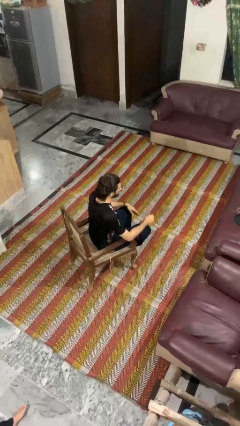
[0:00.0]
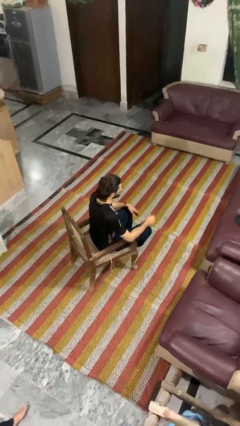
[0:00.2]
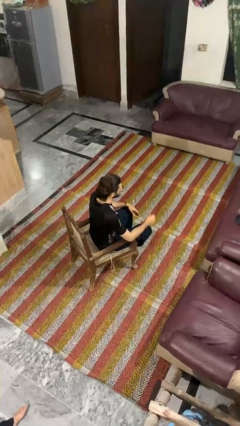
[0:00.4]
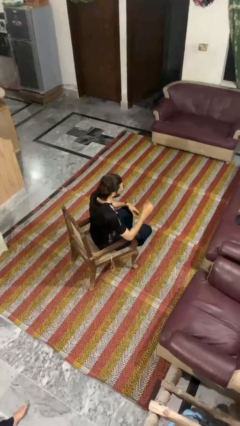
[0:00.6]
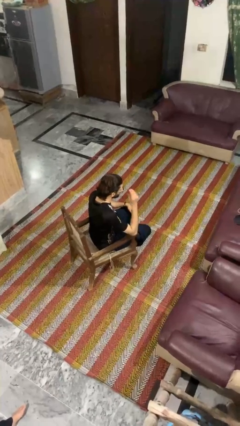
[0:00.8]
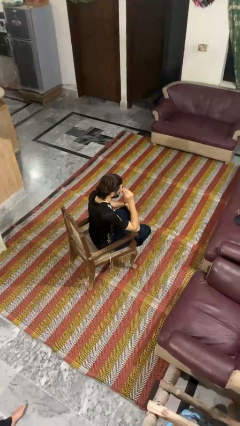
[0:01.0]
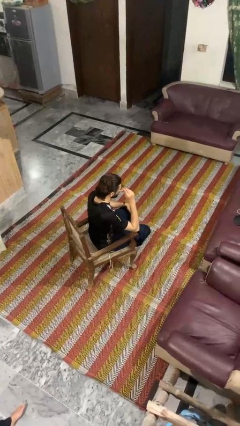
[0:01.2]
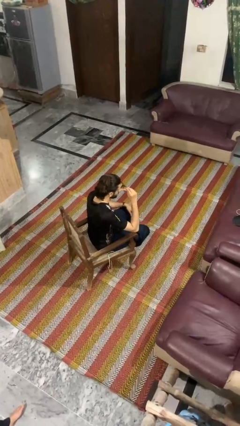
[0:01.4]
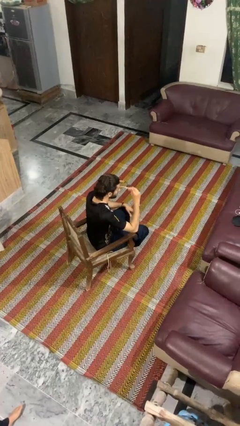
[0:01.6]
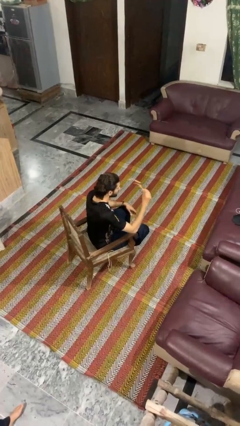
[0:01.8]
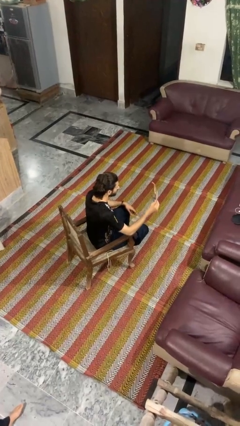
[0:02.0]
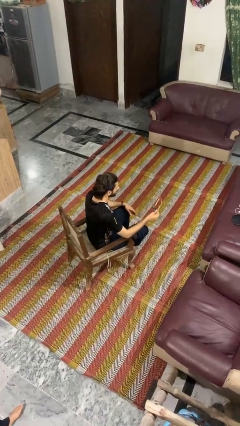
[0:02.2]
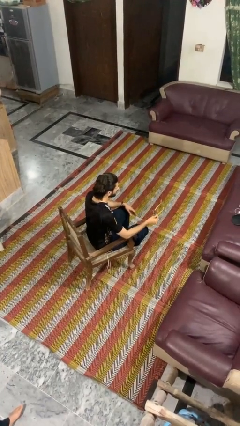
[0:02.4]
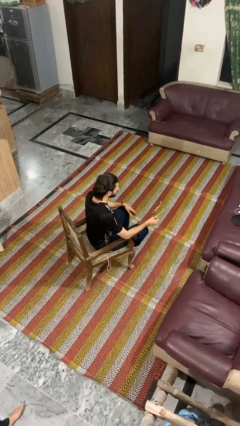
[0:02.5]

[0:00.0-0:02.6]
person takes off glasses

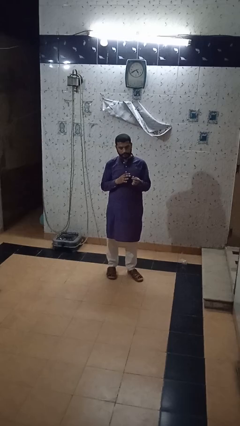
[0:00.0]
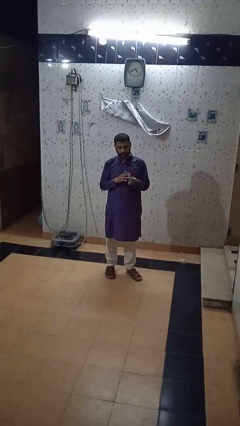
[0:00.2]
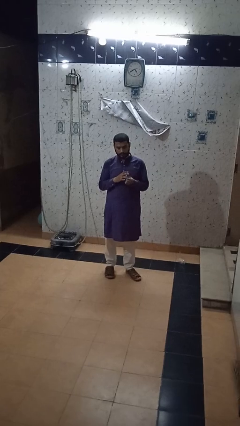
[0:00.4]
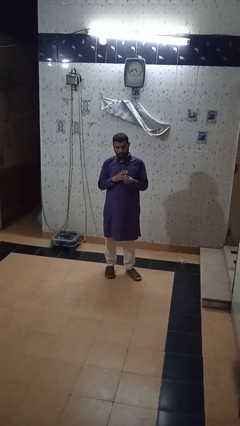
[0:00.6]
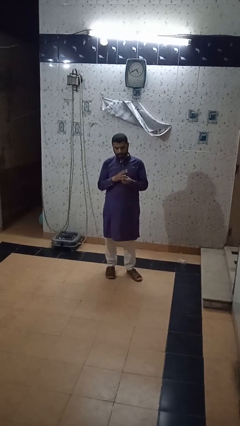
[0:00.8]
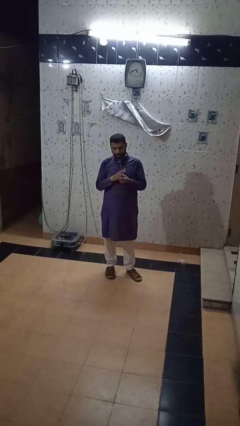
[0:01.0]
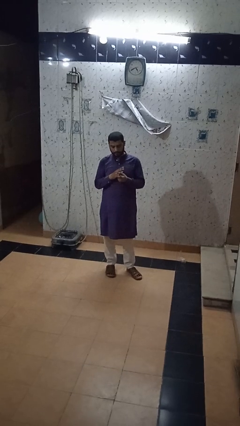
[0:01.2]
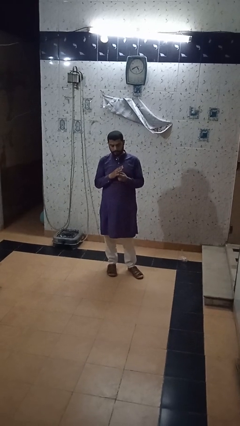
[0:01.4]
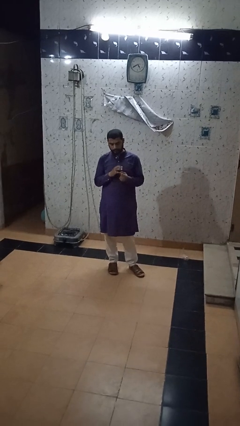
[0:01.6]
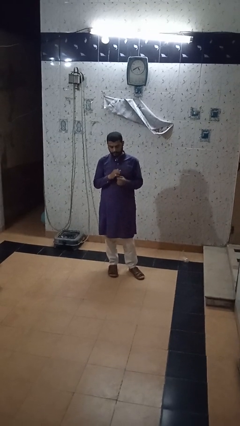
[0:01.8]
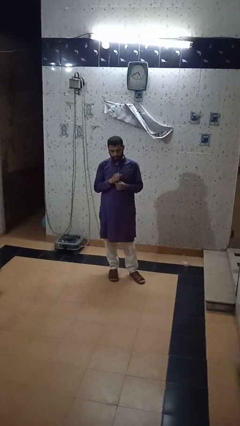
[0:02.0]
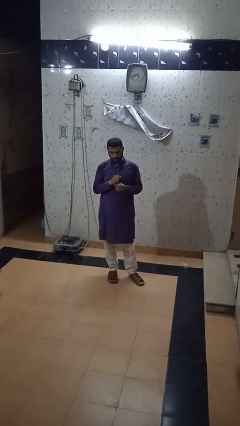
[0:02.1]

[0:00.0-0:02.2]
person puts on ring

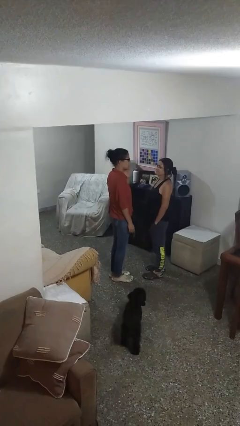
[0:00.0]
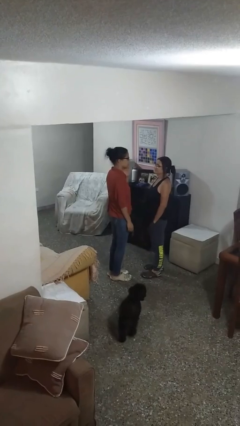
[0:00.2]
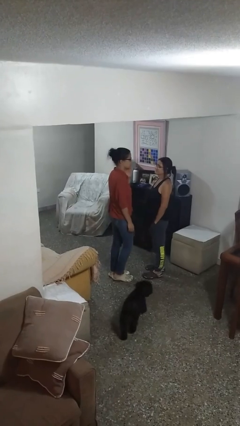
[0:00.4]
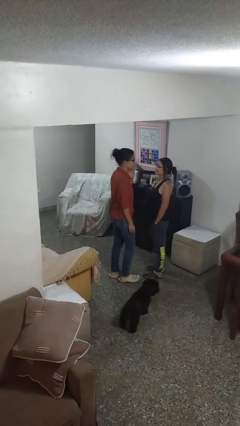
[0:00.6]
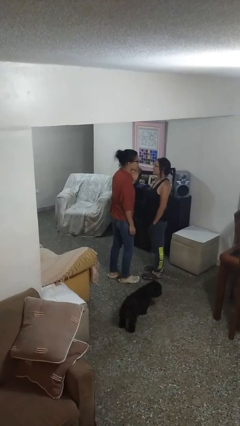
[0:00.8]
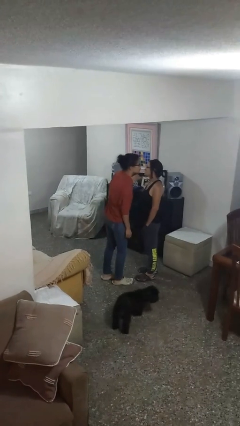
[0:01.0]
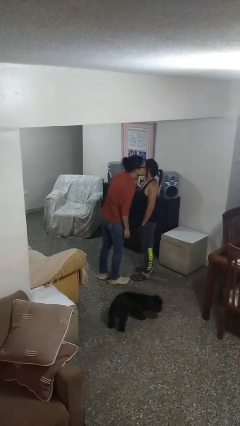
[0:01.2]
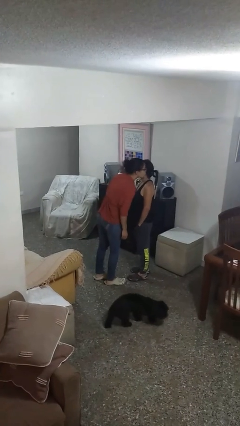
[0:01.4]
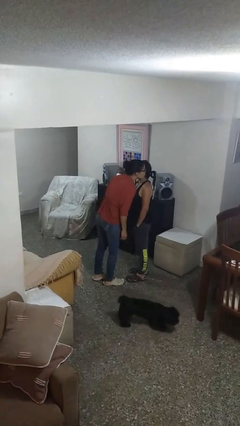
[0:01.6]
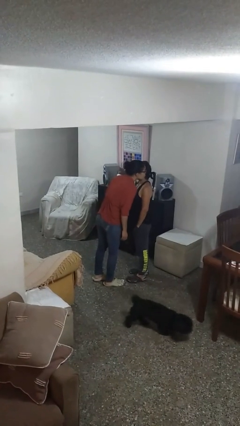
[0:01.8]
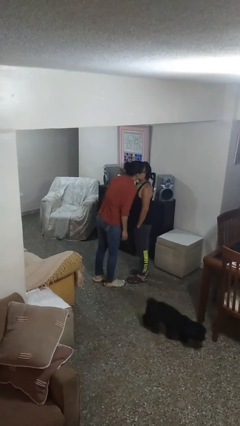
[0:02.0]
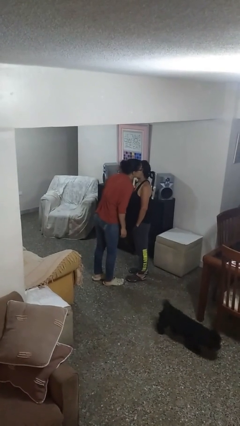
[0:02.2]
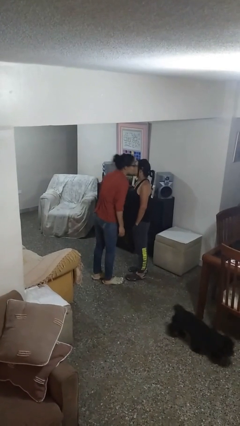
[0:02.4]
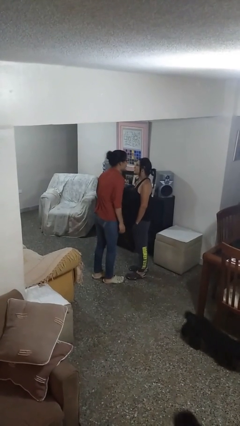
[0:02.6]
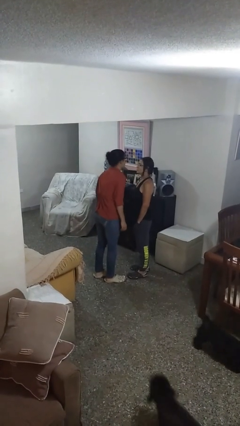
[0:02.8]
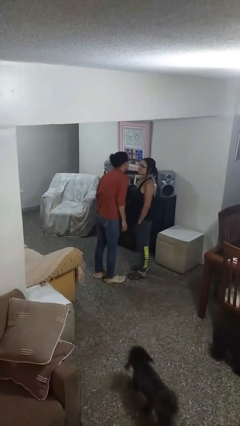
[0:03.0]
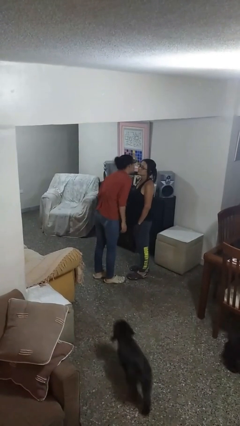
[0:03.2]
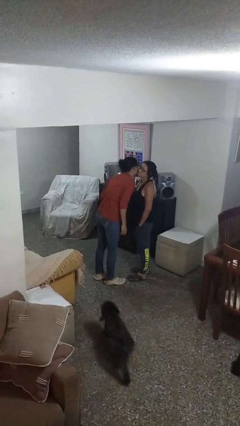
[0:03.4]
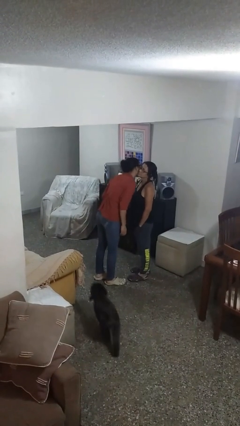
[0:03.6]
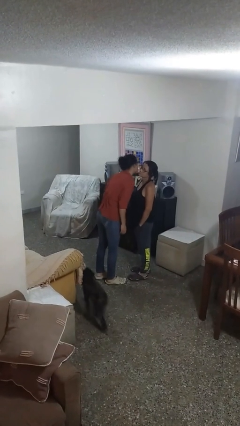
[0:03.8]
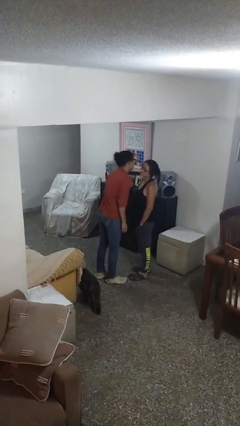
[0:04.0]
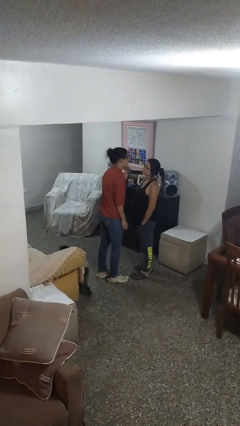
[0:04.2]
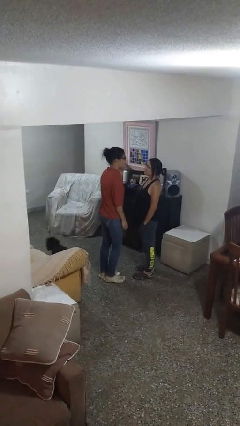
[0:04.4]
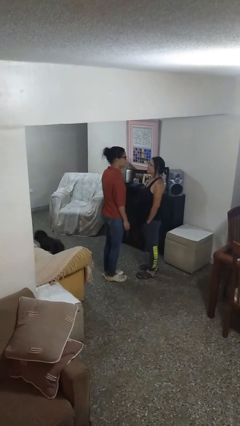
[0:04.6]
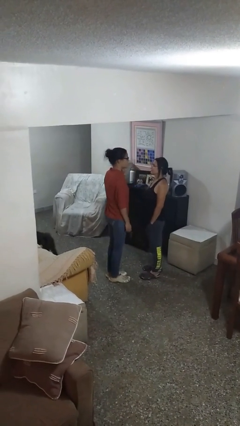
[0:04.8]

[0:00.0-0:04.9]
person kisses cheek of person

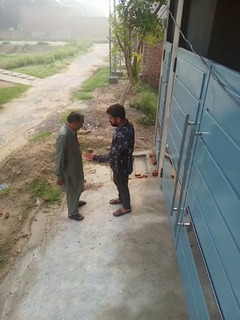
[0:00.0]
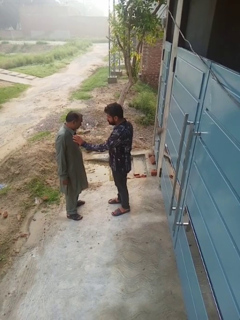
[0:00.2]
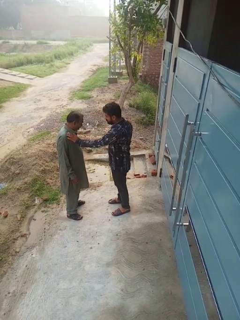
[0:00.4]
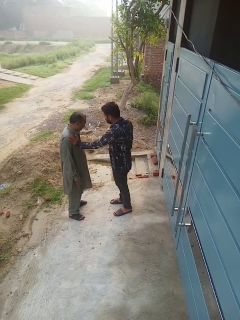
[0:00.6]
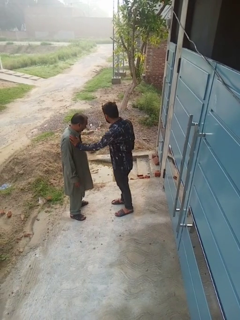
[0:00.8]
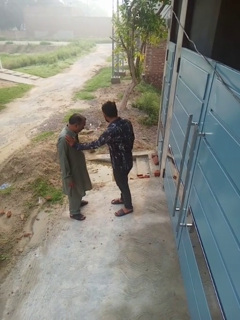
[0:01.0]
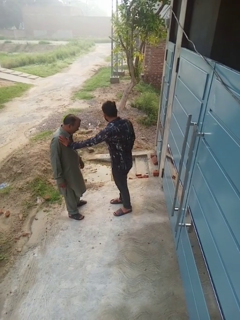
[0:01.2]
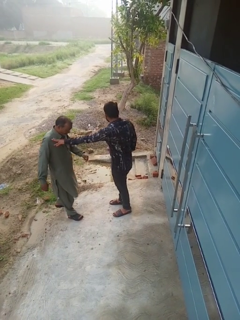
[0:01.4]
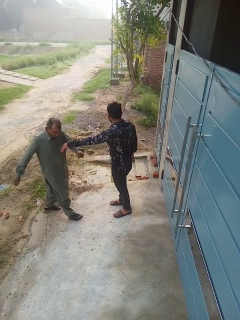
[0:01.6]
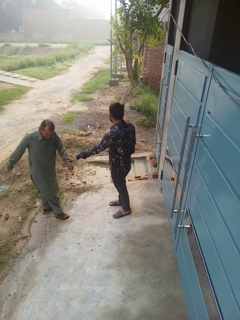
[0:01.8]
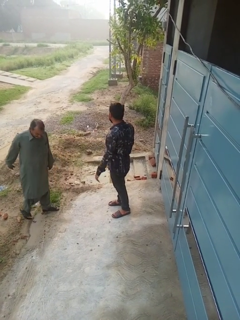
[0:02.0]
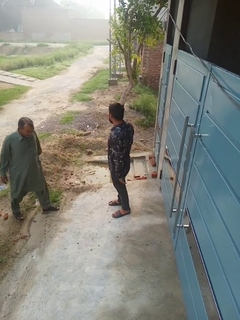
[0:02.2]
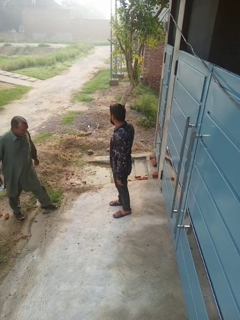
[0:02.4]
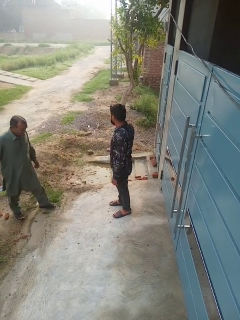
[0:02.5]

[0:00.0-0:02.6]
person shoves person

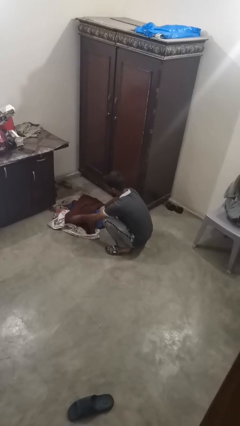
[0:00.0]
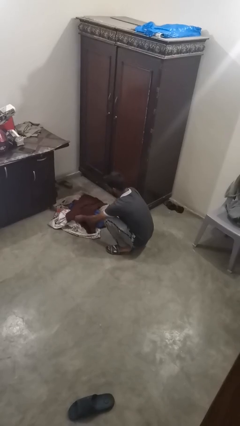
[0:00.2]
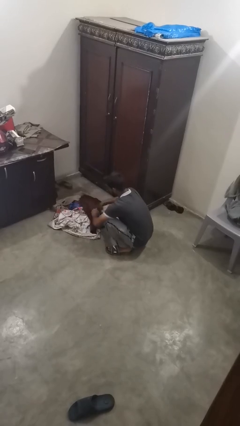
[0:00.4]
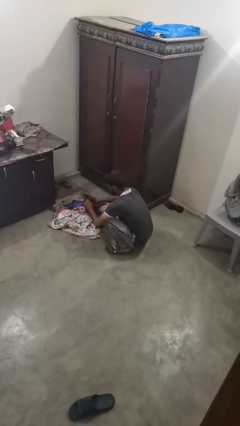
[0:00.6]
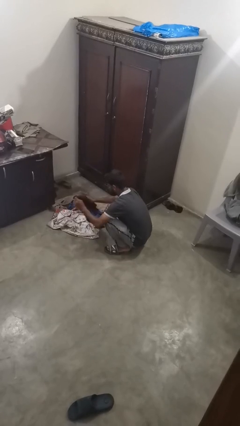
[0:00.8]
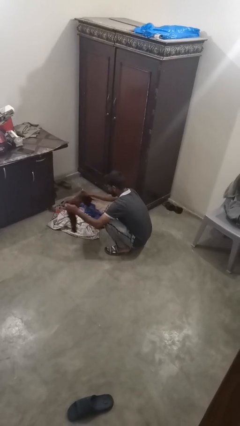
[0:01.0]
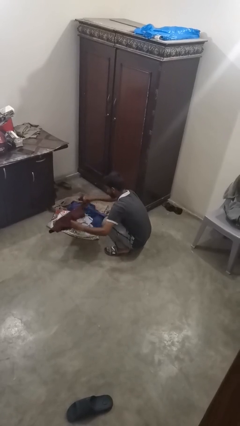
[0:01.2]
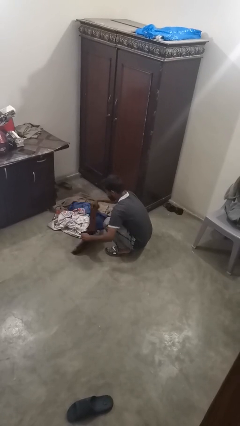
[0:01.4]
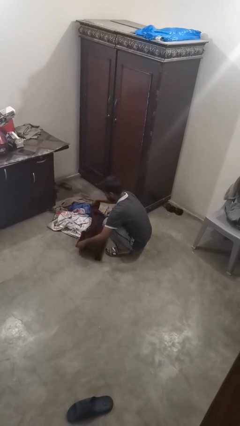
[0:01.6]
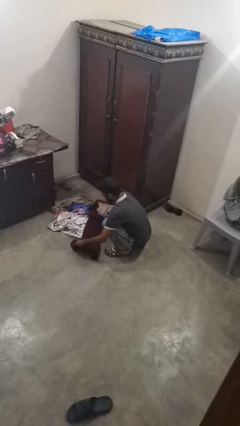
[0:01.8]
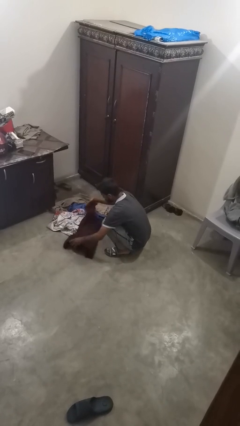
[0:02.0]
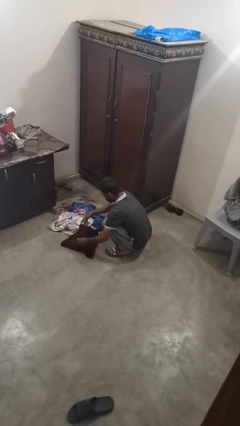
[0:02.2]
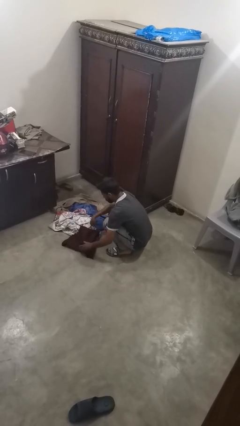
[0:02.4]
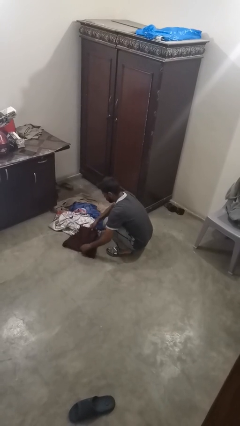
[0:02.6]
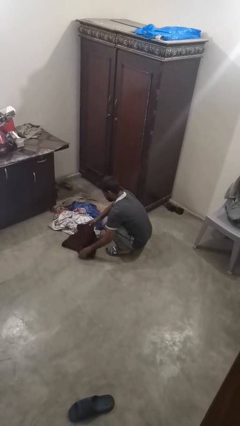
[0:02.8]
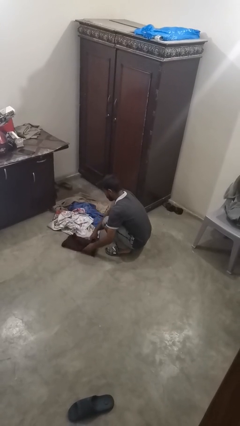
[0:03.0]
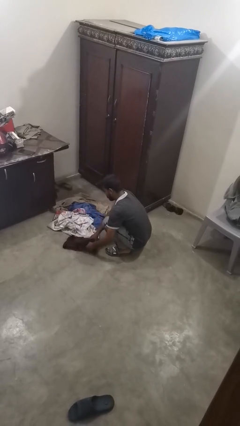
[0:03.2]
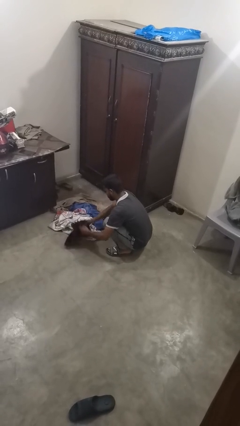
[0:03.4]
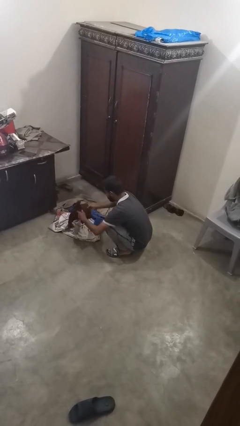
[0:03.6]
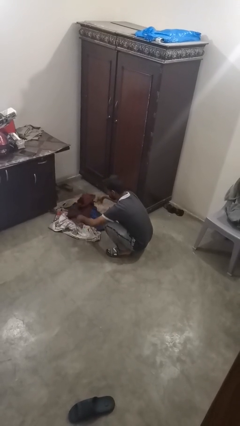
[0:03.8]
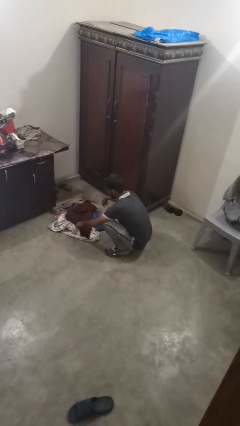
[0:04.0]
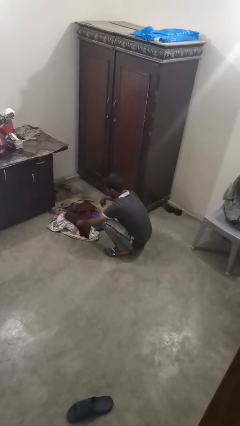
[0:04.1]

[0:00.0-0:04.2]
person folds shirt

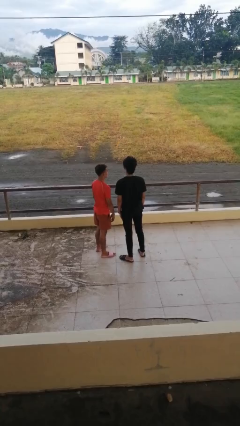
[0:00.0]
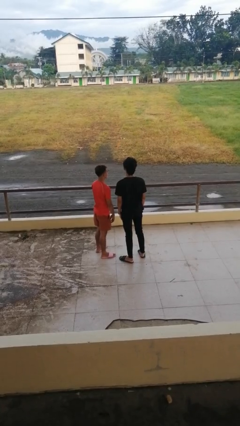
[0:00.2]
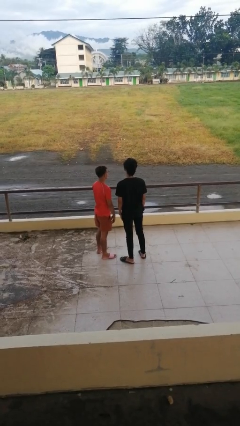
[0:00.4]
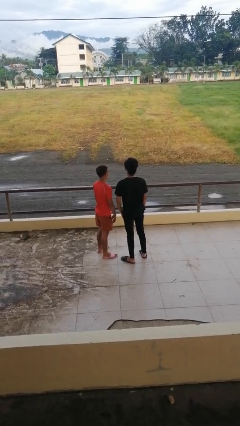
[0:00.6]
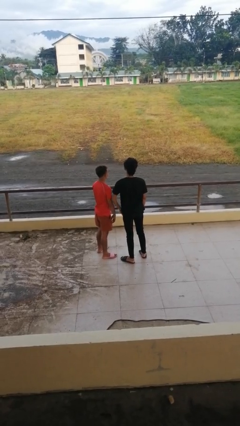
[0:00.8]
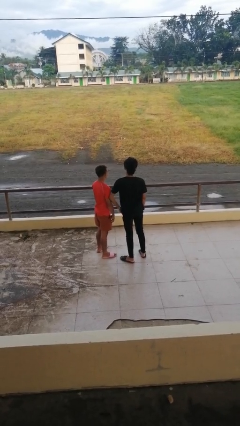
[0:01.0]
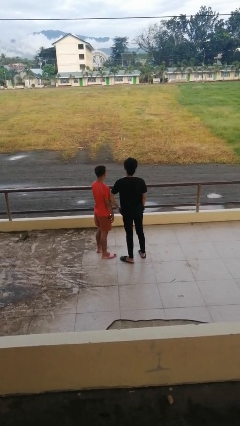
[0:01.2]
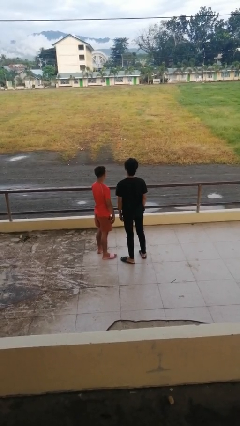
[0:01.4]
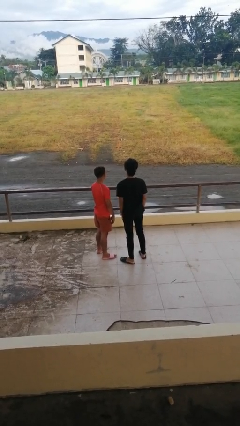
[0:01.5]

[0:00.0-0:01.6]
person nudges person with elbow
